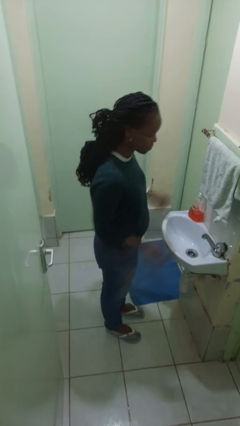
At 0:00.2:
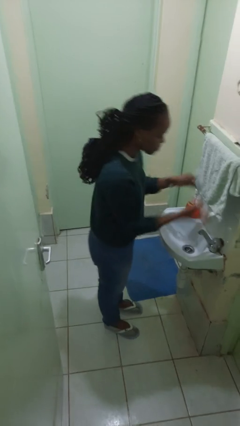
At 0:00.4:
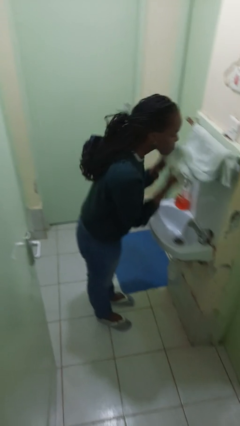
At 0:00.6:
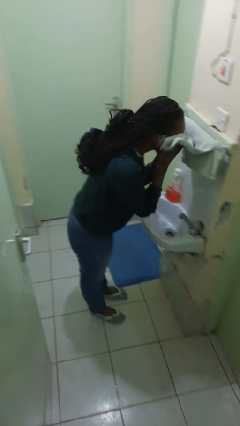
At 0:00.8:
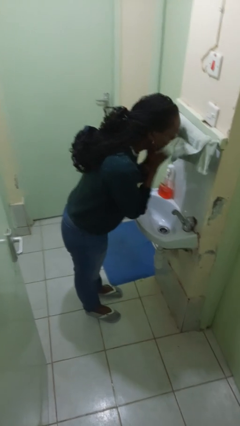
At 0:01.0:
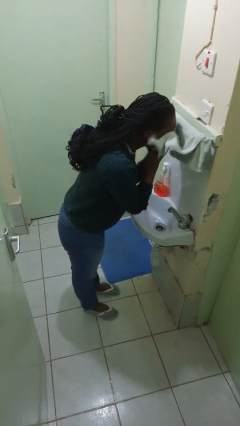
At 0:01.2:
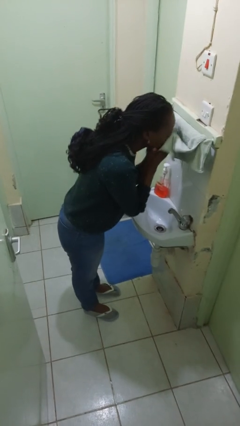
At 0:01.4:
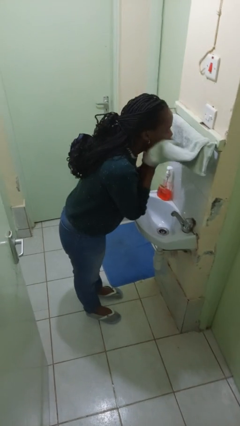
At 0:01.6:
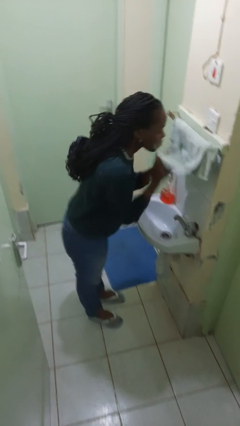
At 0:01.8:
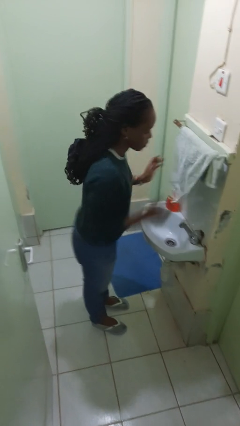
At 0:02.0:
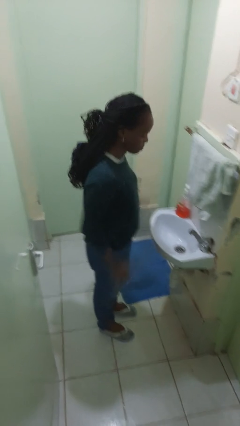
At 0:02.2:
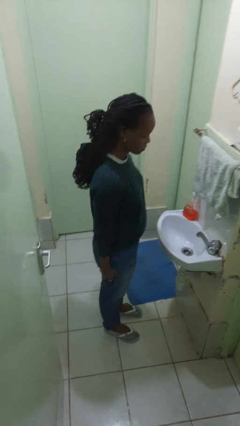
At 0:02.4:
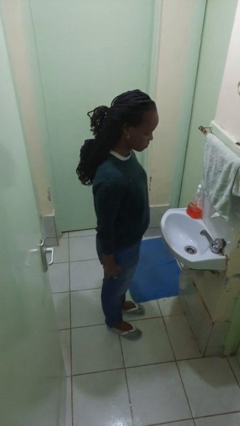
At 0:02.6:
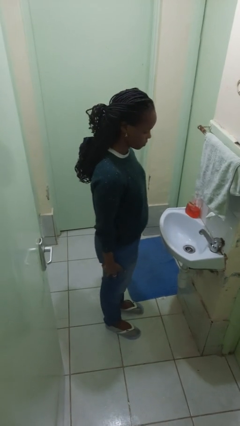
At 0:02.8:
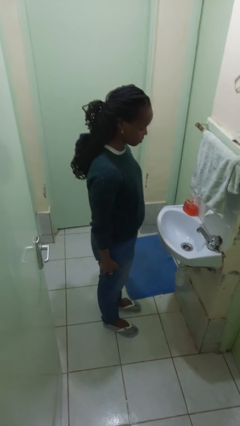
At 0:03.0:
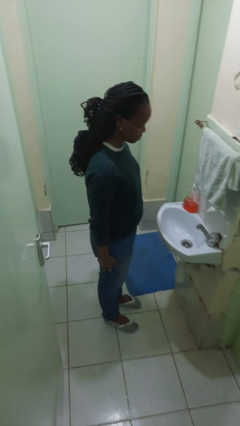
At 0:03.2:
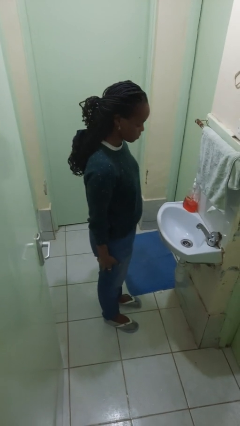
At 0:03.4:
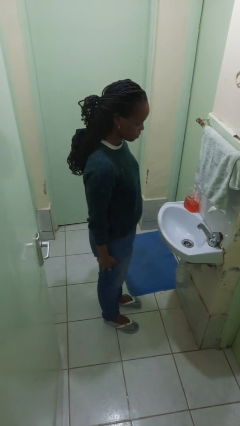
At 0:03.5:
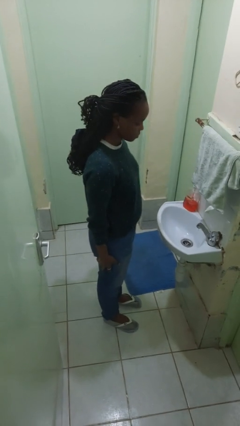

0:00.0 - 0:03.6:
person dries face with towel

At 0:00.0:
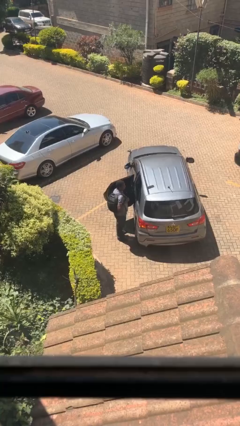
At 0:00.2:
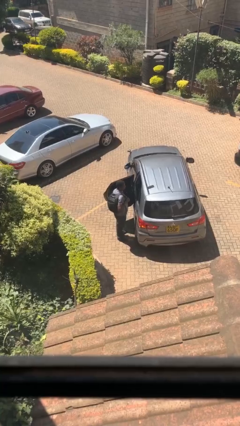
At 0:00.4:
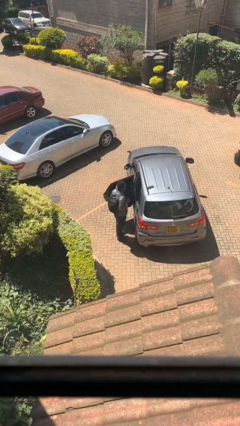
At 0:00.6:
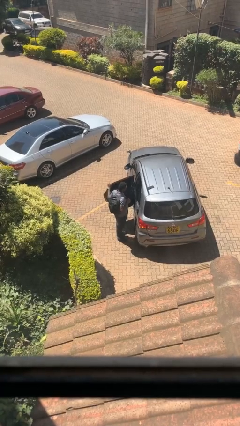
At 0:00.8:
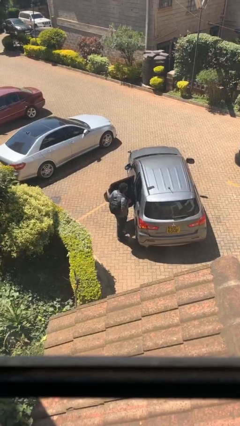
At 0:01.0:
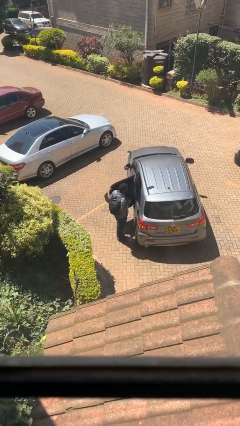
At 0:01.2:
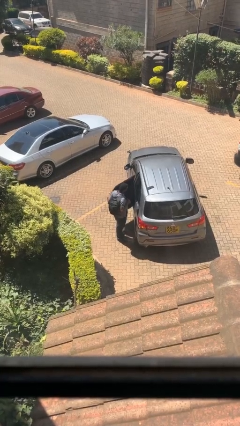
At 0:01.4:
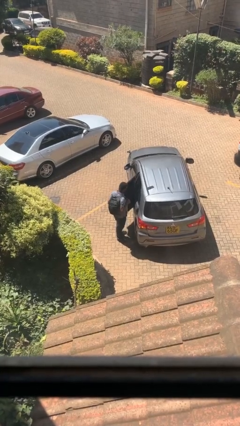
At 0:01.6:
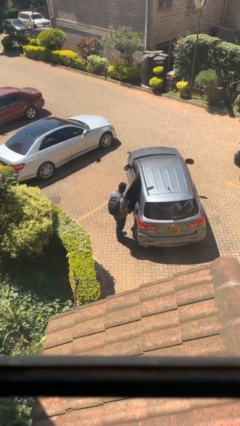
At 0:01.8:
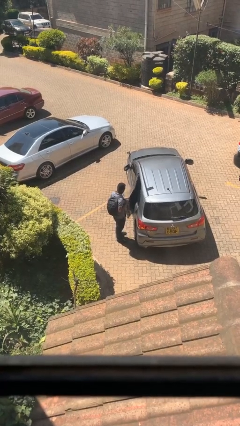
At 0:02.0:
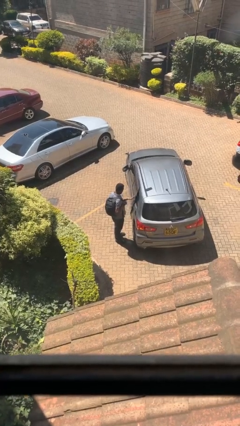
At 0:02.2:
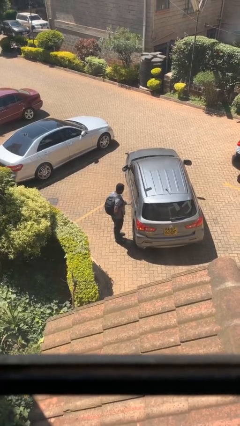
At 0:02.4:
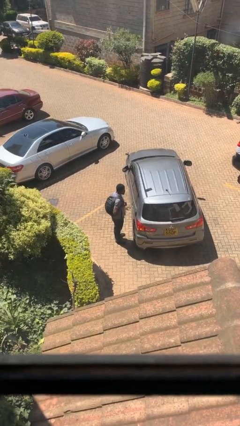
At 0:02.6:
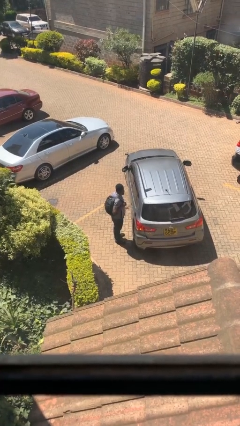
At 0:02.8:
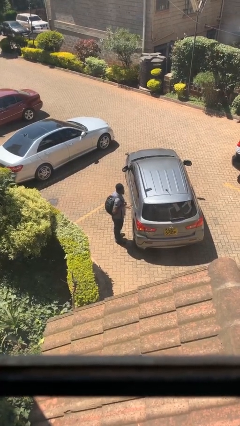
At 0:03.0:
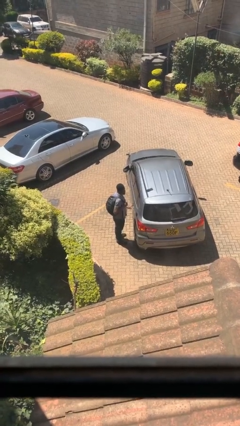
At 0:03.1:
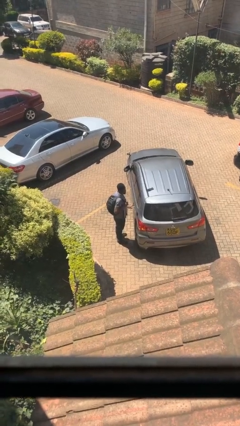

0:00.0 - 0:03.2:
person closes car door

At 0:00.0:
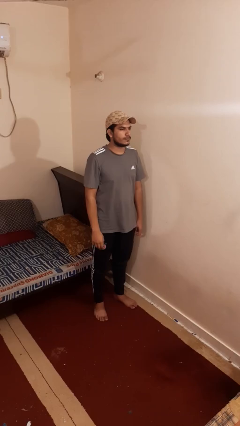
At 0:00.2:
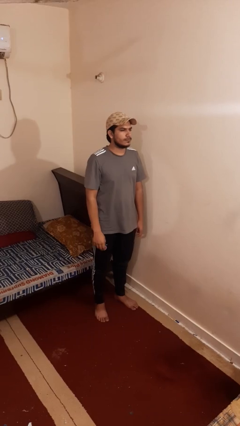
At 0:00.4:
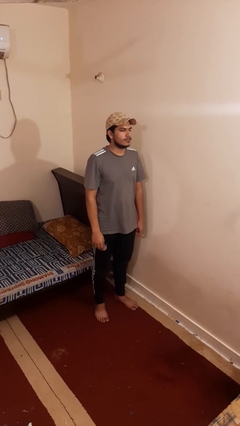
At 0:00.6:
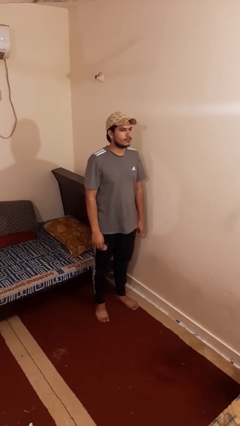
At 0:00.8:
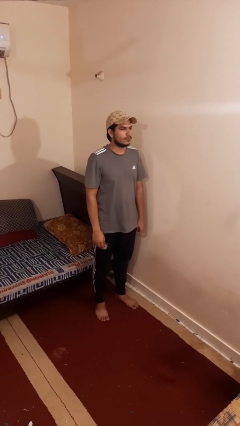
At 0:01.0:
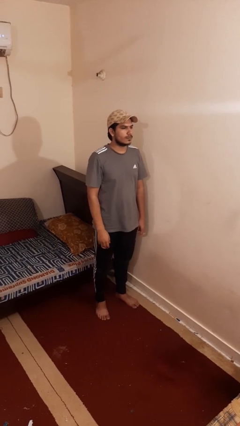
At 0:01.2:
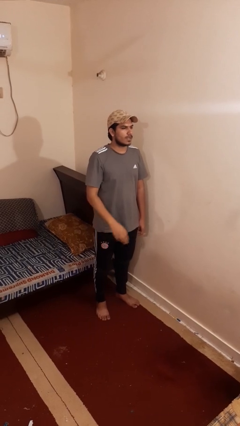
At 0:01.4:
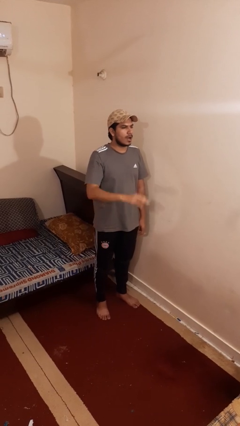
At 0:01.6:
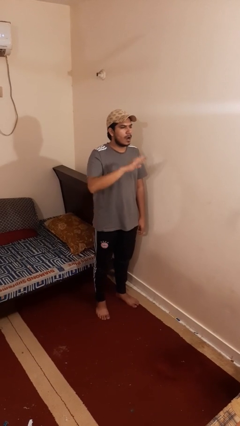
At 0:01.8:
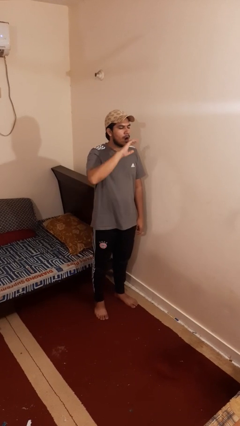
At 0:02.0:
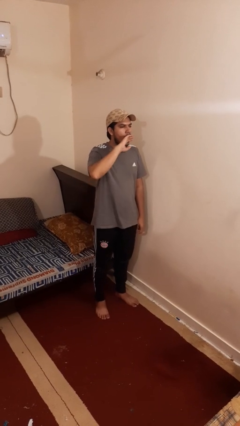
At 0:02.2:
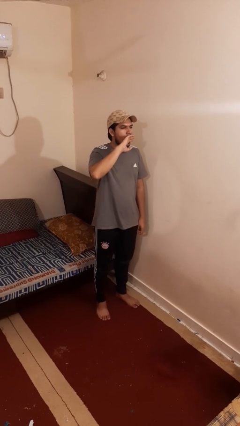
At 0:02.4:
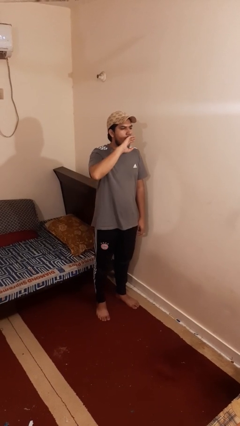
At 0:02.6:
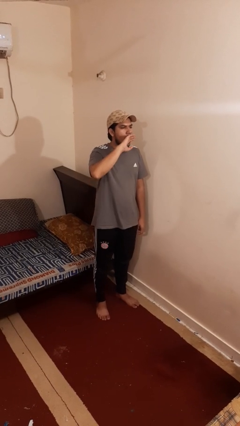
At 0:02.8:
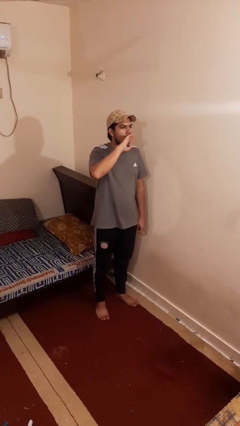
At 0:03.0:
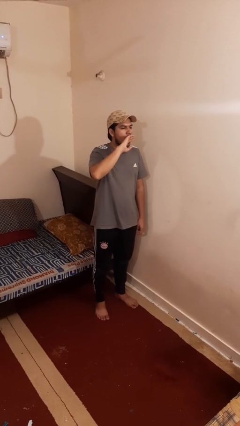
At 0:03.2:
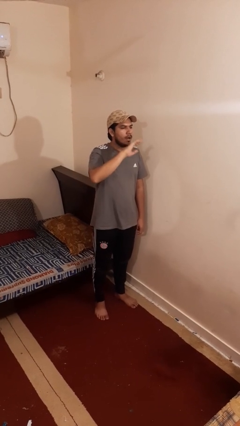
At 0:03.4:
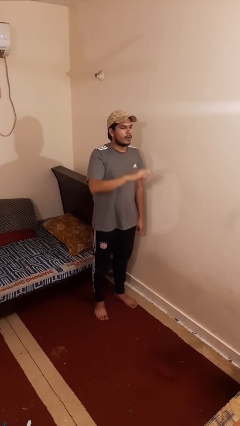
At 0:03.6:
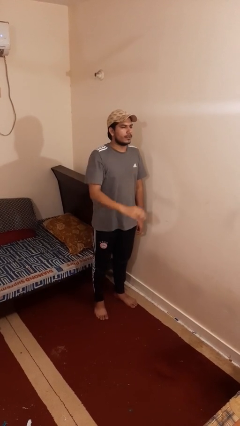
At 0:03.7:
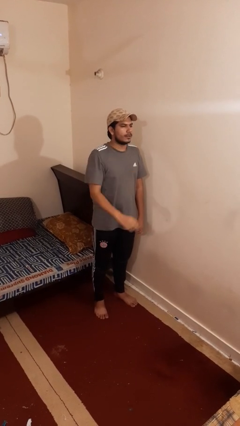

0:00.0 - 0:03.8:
person yawns

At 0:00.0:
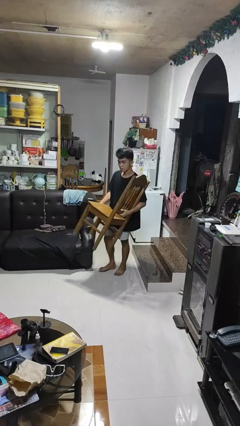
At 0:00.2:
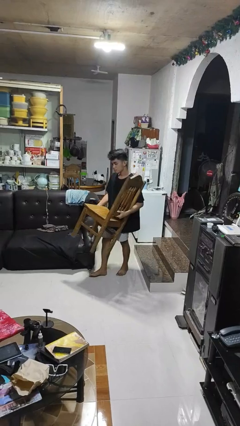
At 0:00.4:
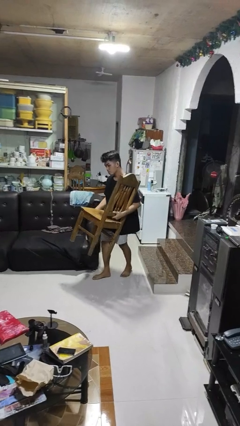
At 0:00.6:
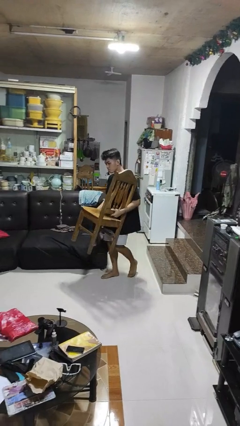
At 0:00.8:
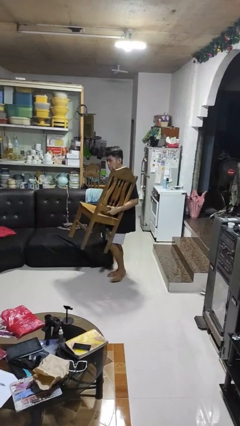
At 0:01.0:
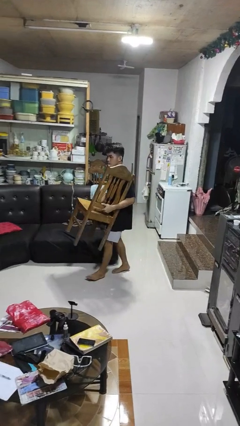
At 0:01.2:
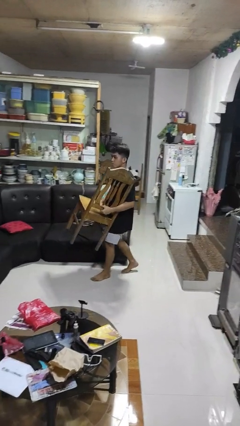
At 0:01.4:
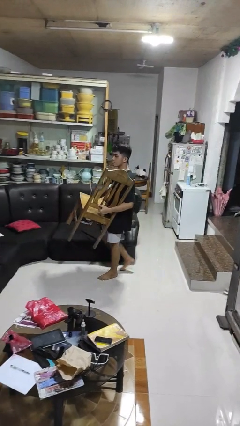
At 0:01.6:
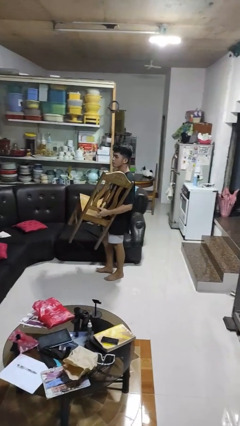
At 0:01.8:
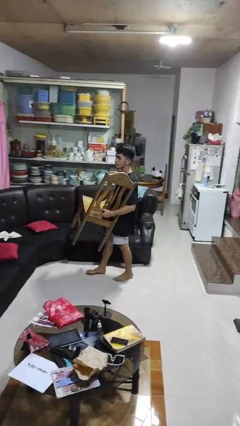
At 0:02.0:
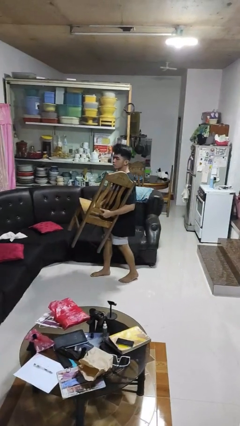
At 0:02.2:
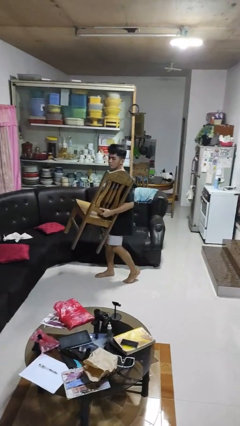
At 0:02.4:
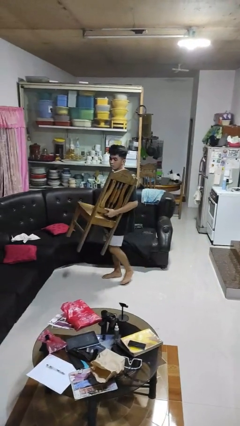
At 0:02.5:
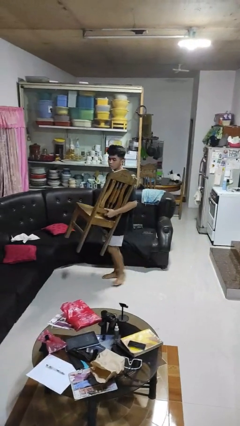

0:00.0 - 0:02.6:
person carries furniture

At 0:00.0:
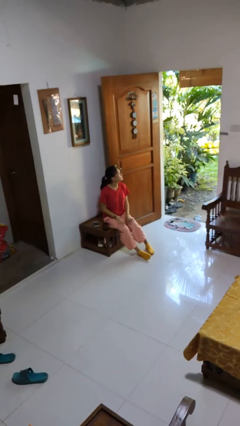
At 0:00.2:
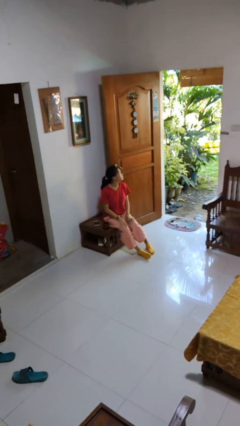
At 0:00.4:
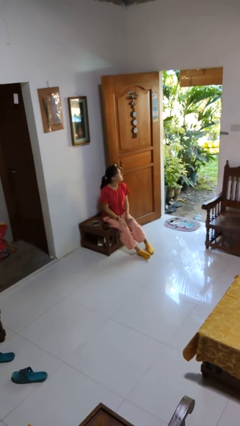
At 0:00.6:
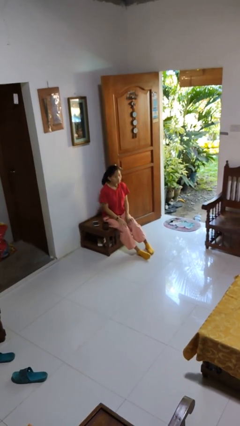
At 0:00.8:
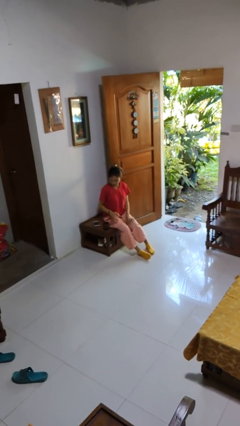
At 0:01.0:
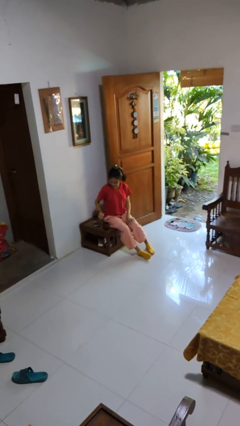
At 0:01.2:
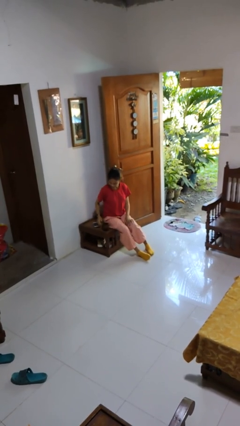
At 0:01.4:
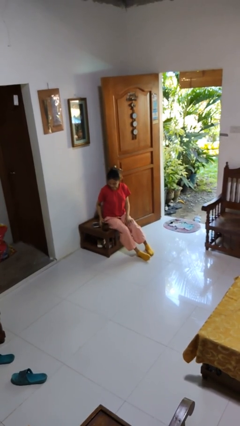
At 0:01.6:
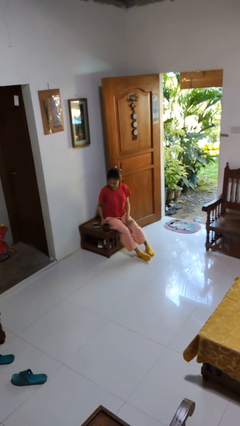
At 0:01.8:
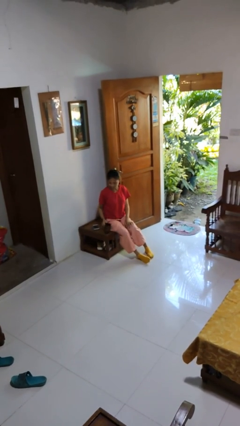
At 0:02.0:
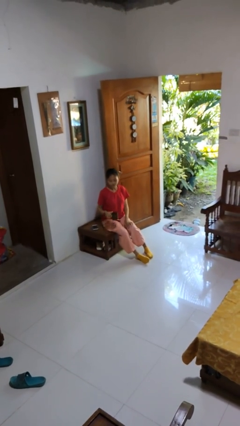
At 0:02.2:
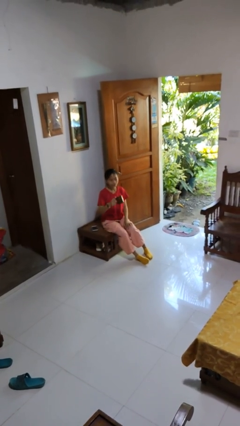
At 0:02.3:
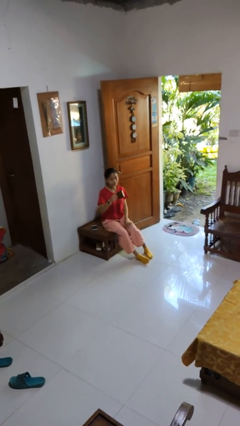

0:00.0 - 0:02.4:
person picks up object from table

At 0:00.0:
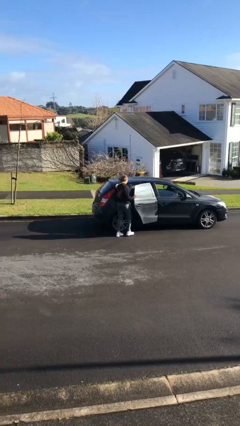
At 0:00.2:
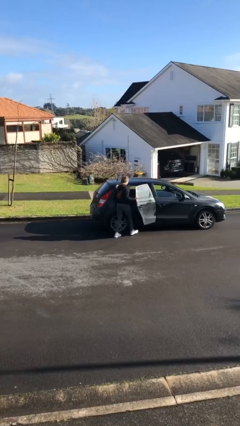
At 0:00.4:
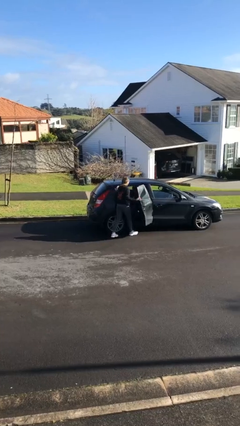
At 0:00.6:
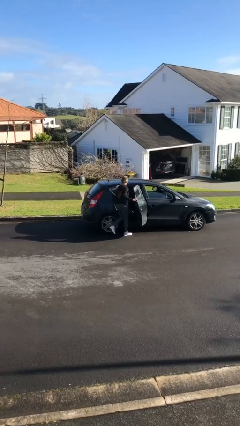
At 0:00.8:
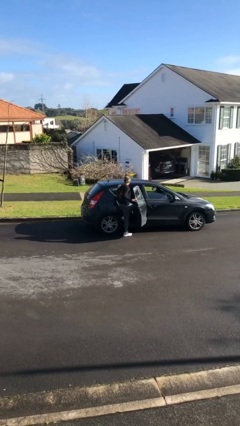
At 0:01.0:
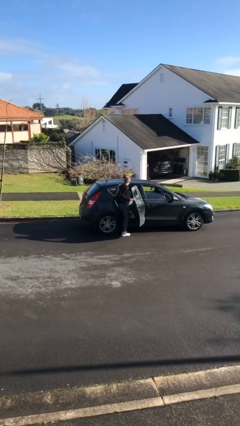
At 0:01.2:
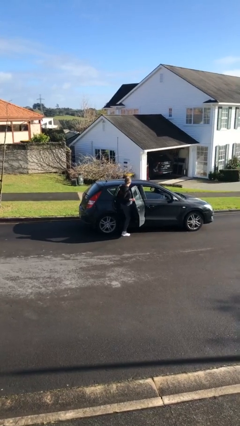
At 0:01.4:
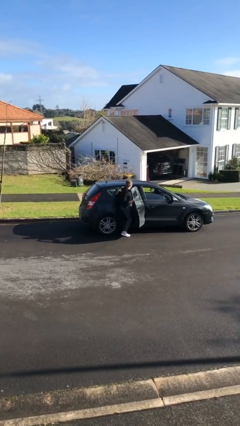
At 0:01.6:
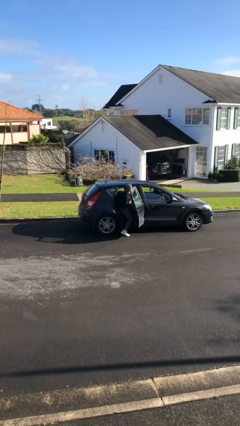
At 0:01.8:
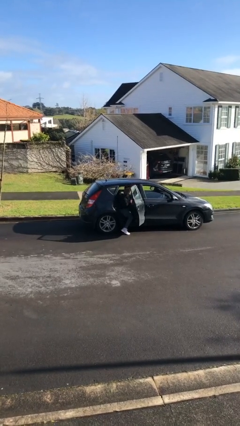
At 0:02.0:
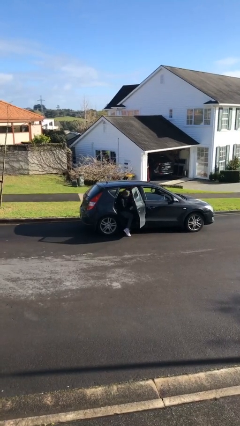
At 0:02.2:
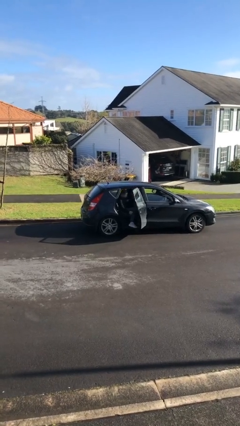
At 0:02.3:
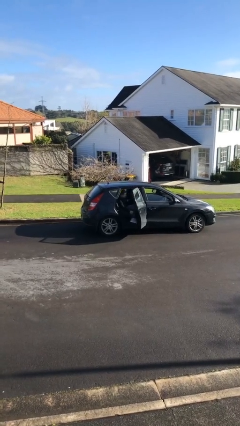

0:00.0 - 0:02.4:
person enters car
